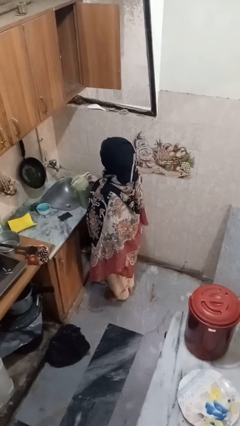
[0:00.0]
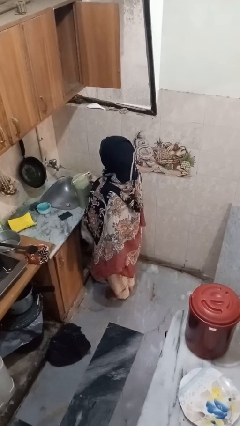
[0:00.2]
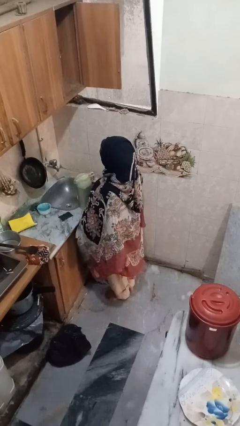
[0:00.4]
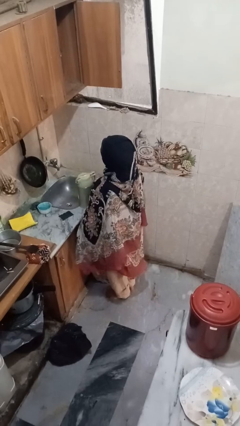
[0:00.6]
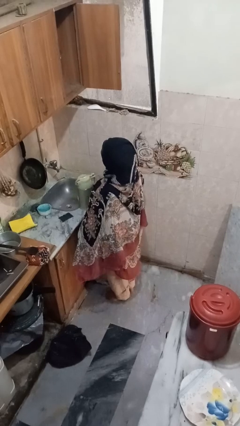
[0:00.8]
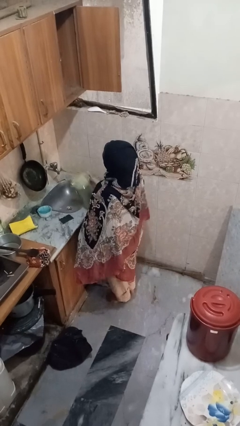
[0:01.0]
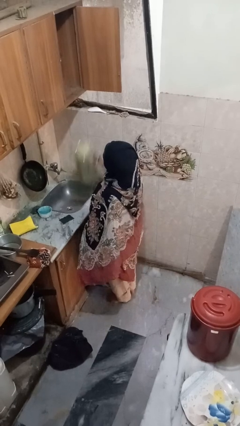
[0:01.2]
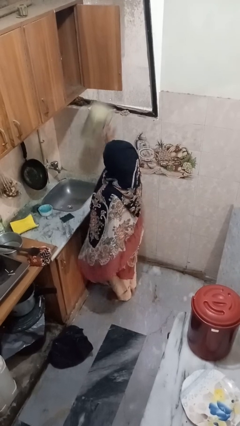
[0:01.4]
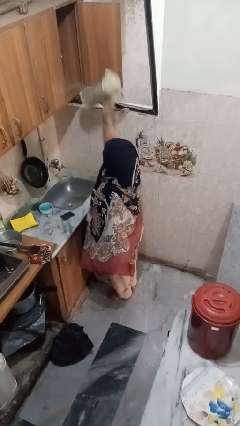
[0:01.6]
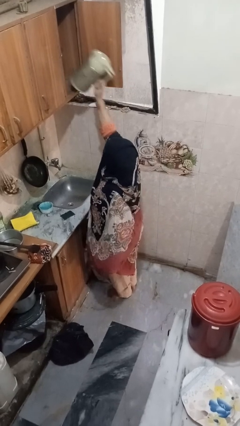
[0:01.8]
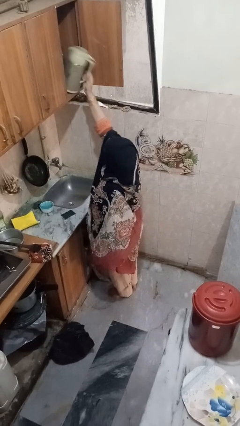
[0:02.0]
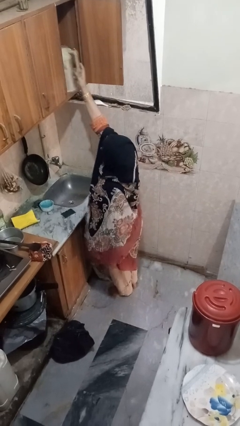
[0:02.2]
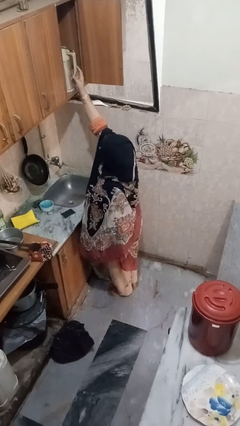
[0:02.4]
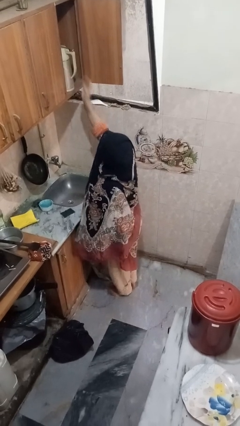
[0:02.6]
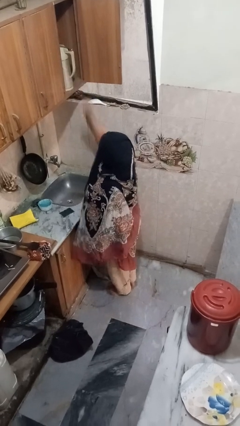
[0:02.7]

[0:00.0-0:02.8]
person takes object from cabinet

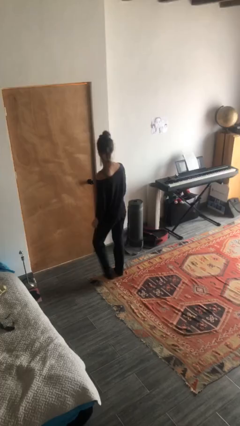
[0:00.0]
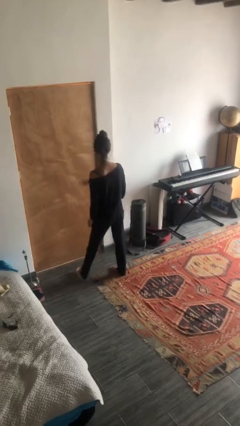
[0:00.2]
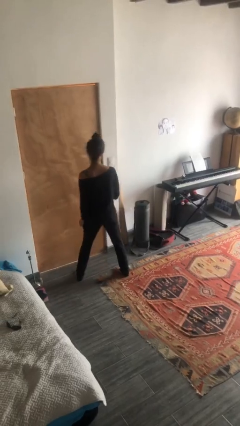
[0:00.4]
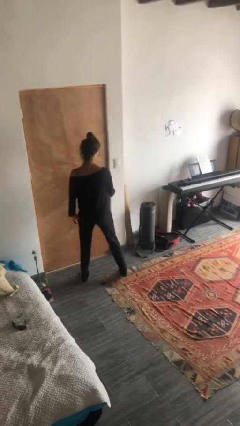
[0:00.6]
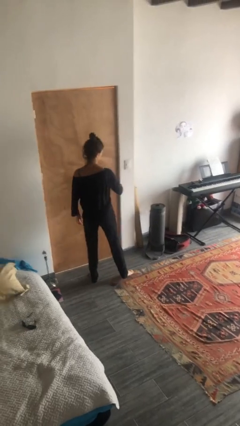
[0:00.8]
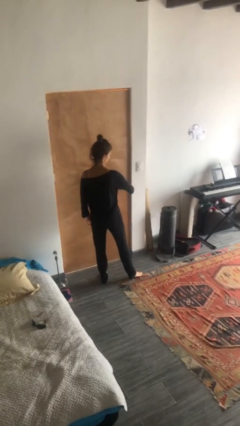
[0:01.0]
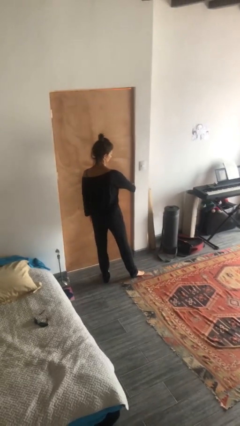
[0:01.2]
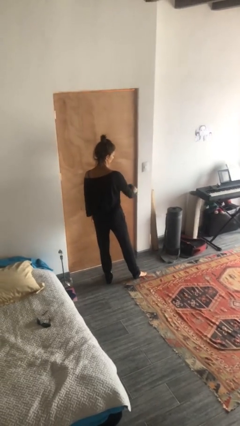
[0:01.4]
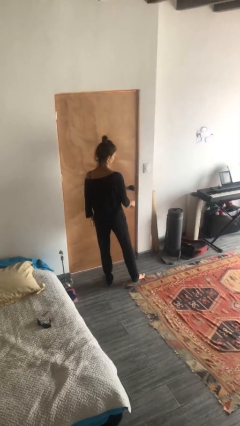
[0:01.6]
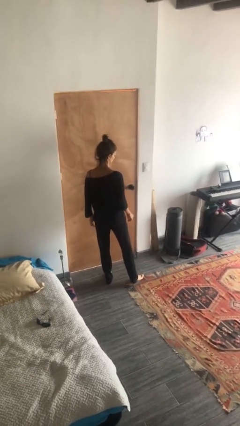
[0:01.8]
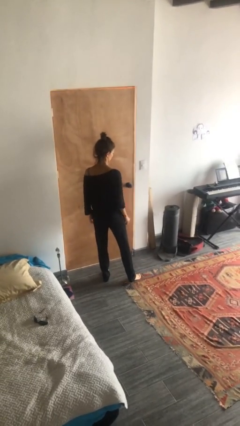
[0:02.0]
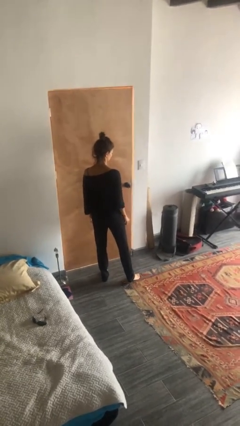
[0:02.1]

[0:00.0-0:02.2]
person unlocks door with keys

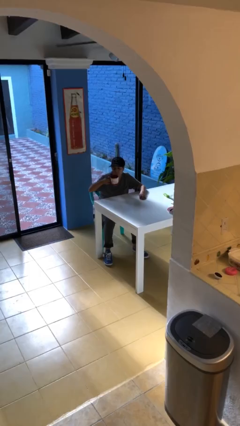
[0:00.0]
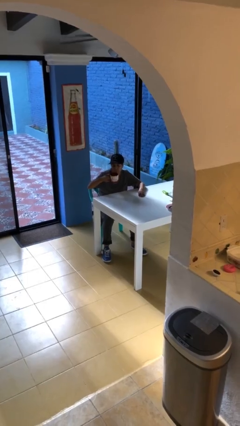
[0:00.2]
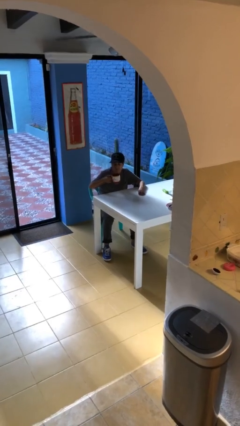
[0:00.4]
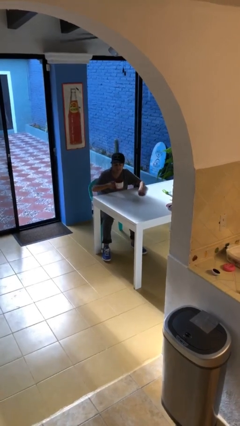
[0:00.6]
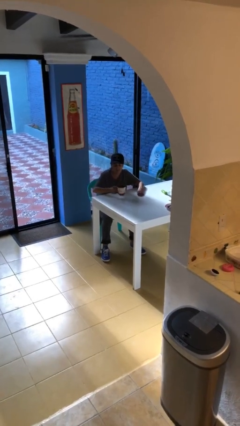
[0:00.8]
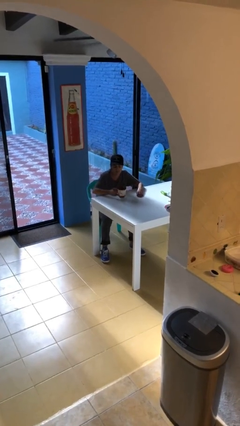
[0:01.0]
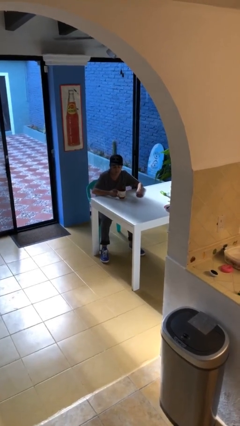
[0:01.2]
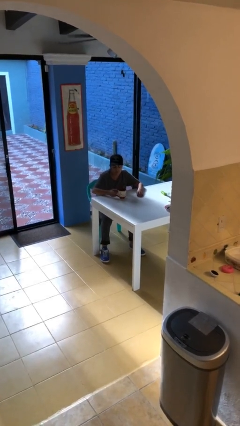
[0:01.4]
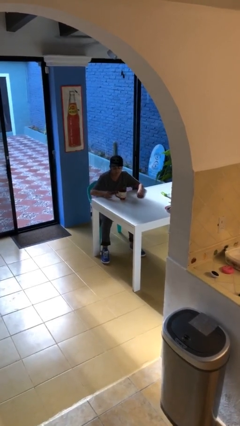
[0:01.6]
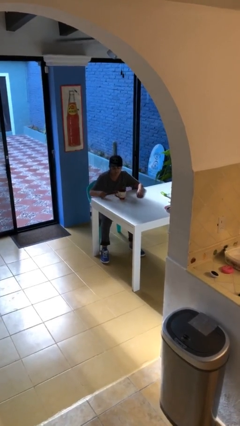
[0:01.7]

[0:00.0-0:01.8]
person puts down object on table

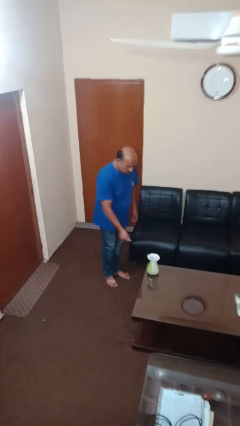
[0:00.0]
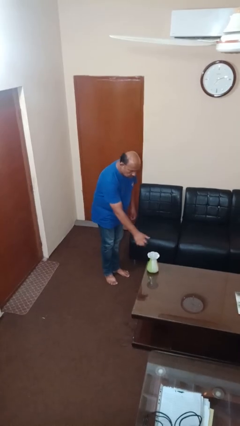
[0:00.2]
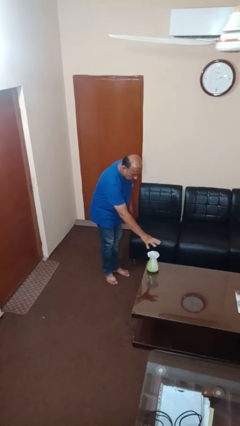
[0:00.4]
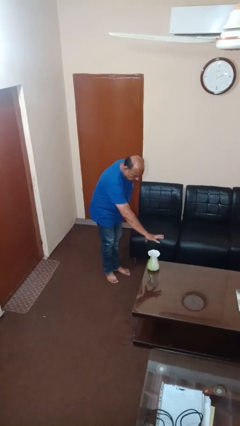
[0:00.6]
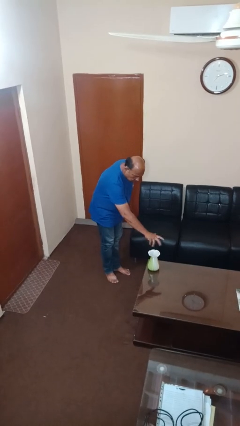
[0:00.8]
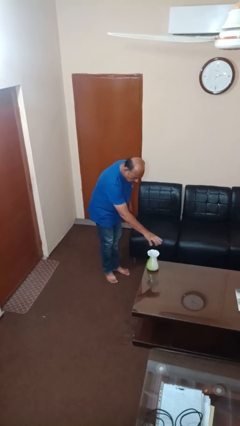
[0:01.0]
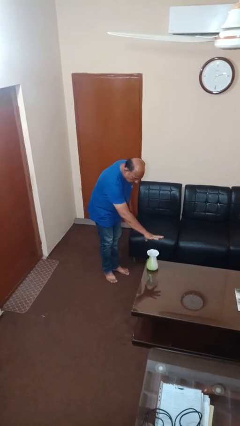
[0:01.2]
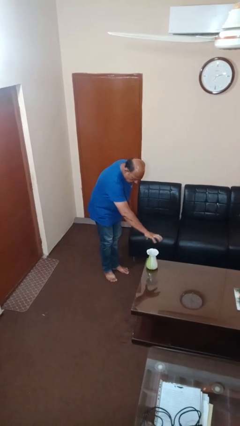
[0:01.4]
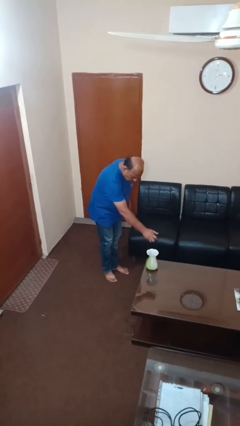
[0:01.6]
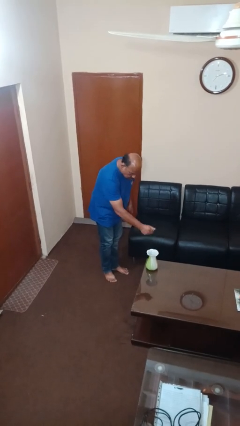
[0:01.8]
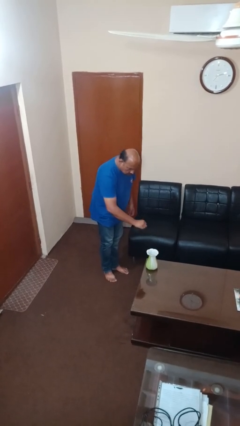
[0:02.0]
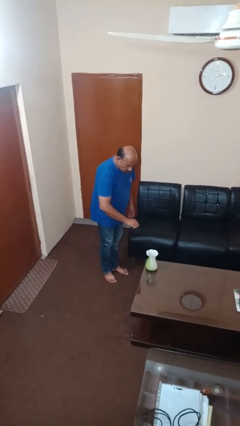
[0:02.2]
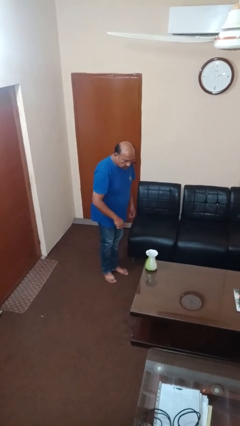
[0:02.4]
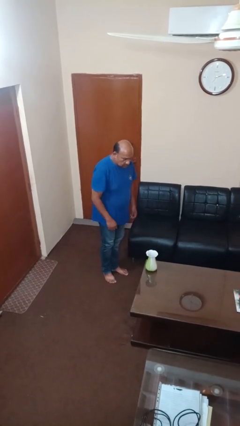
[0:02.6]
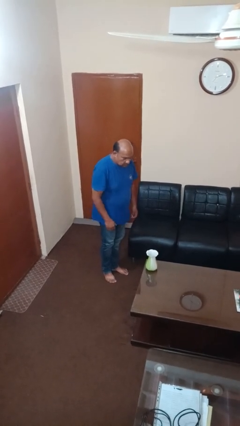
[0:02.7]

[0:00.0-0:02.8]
person waves hand over object

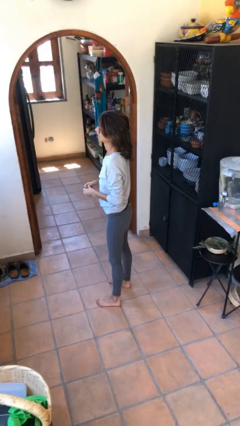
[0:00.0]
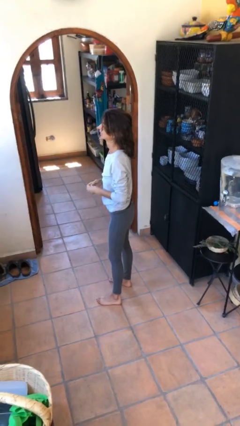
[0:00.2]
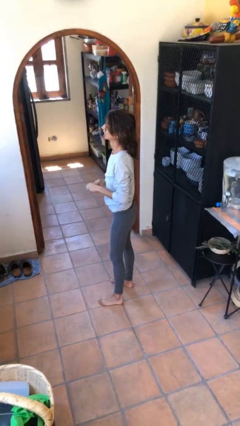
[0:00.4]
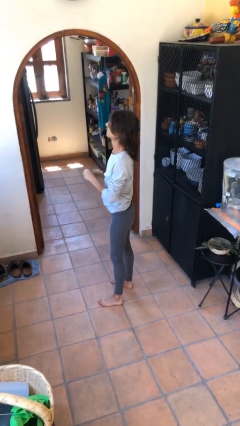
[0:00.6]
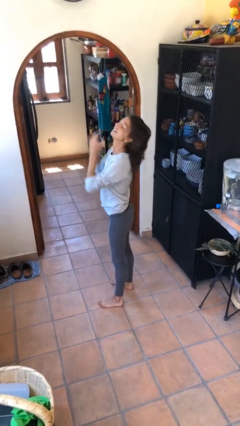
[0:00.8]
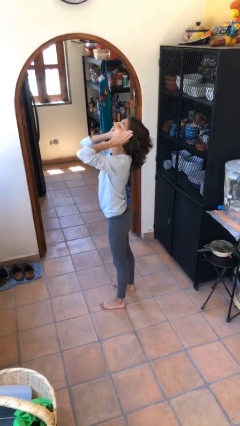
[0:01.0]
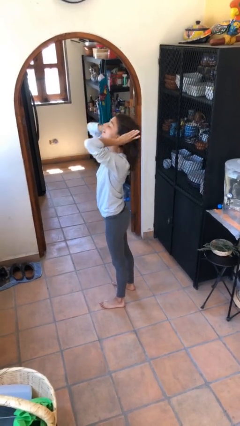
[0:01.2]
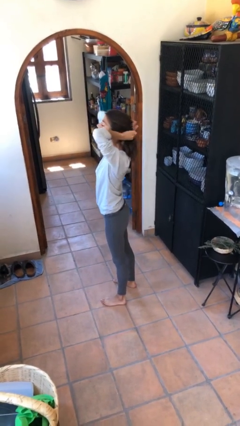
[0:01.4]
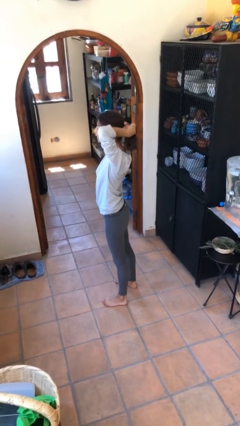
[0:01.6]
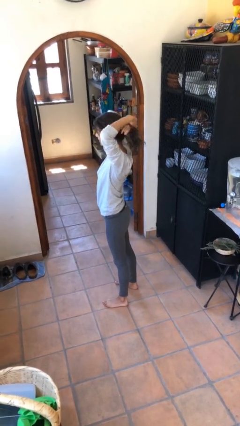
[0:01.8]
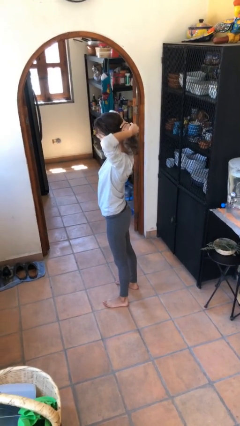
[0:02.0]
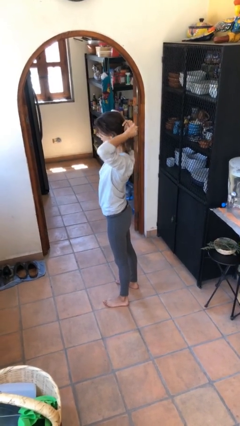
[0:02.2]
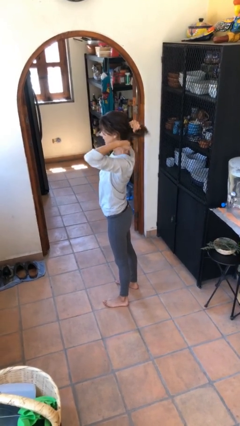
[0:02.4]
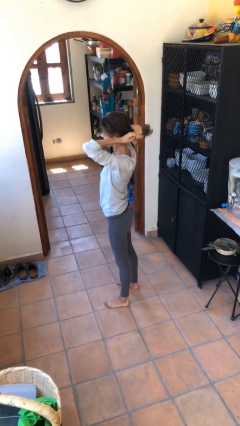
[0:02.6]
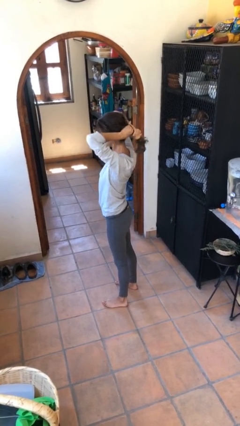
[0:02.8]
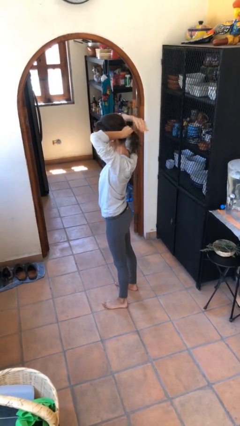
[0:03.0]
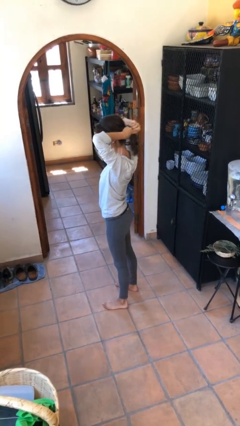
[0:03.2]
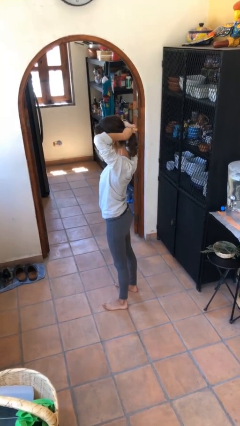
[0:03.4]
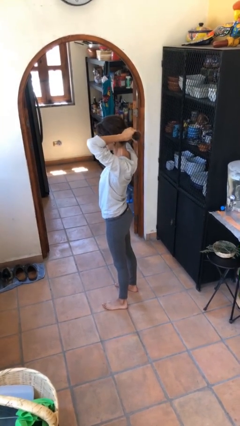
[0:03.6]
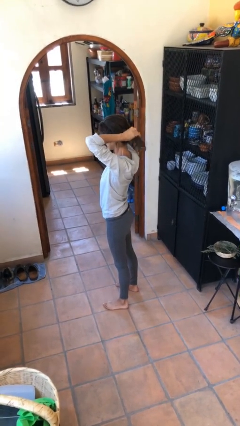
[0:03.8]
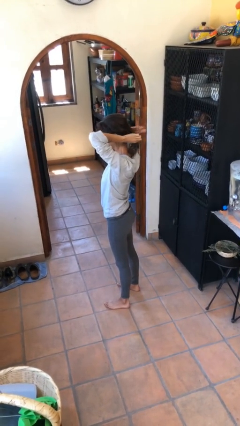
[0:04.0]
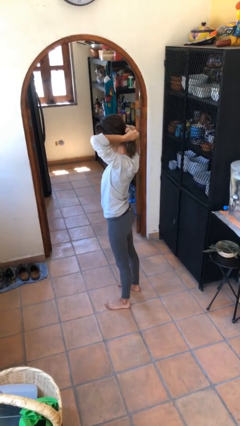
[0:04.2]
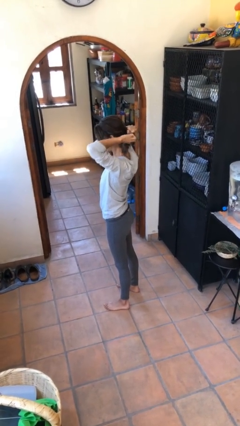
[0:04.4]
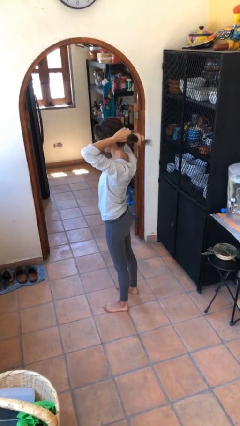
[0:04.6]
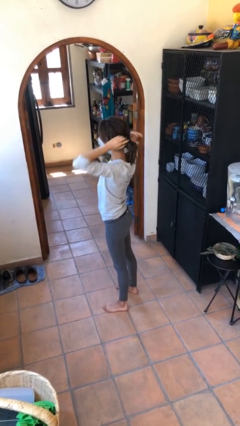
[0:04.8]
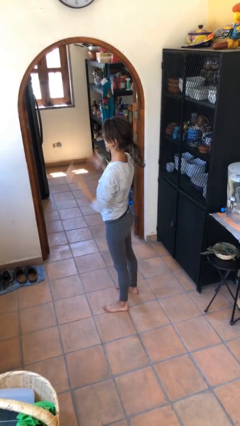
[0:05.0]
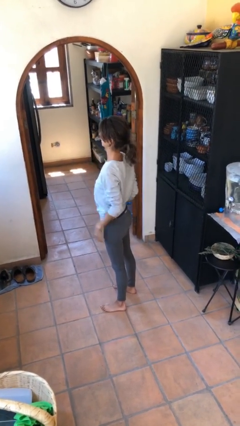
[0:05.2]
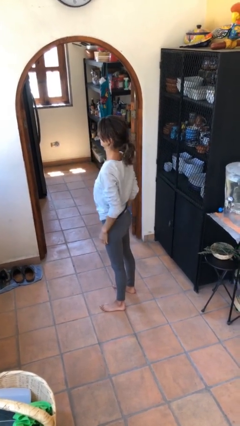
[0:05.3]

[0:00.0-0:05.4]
person puts hair in ponytail

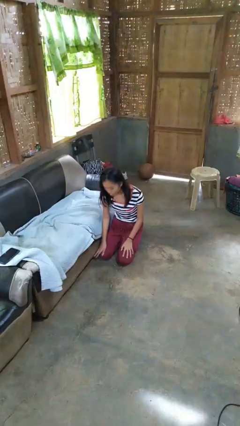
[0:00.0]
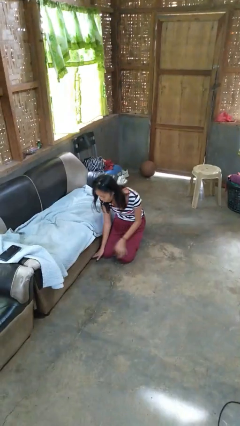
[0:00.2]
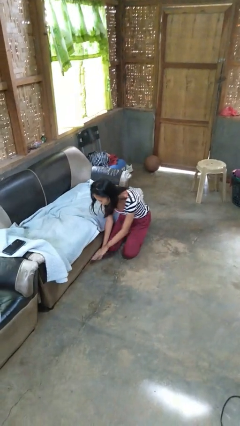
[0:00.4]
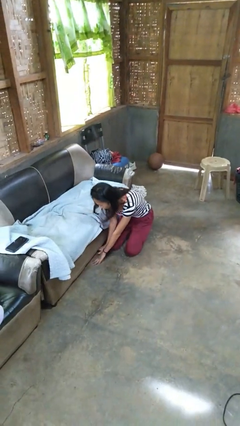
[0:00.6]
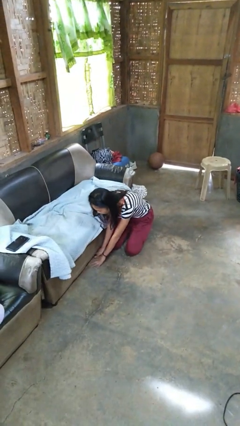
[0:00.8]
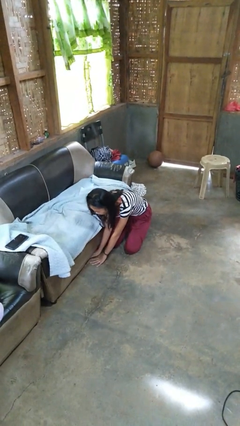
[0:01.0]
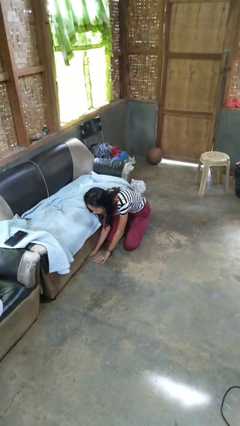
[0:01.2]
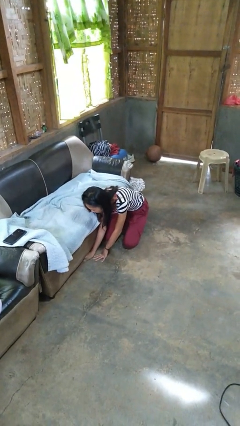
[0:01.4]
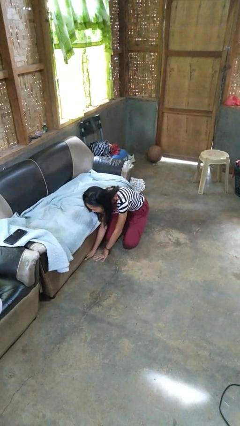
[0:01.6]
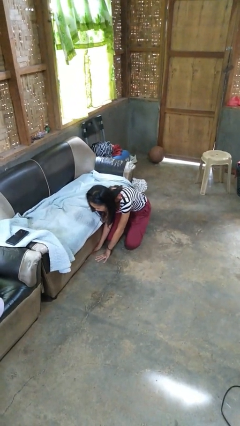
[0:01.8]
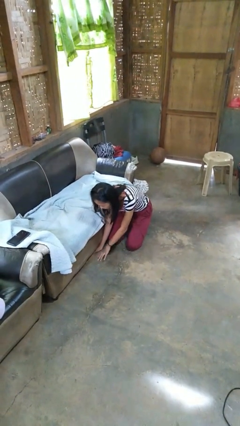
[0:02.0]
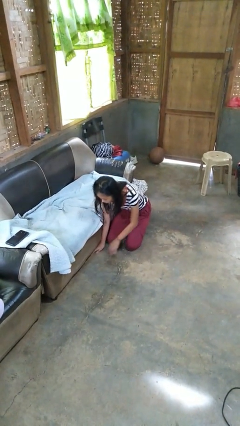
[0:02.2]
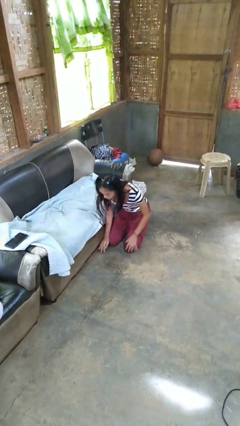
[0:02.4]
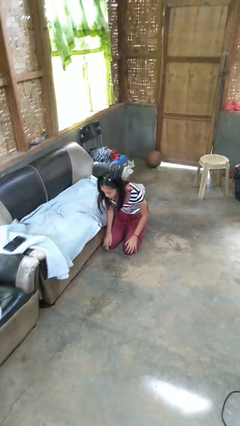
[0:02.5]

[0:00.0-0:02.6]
person searches under couch
